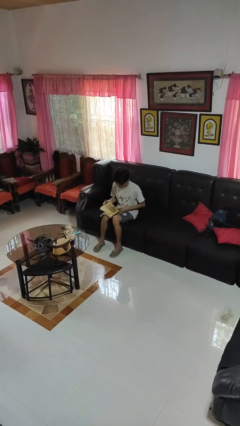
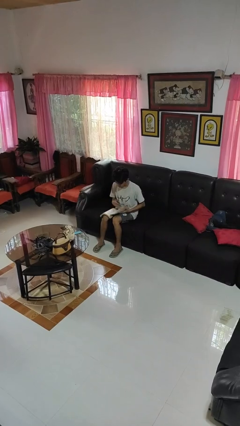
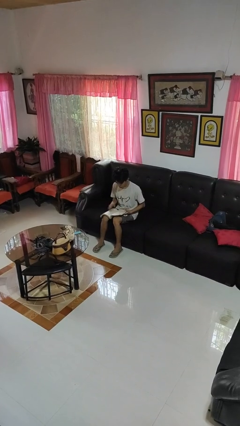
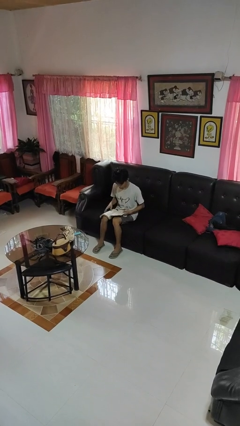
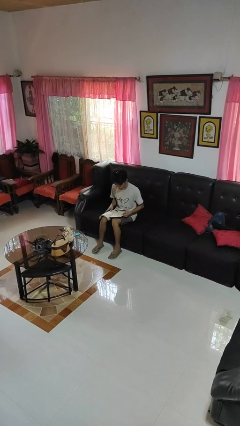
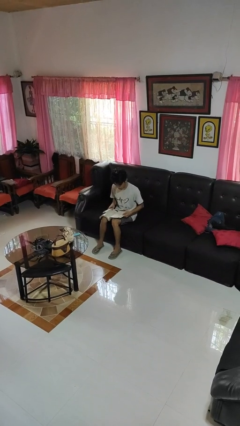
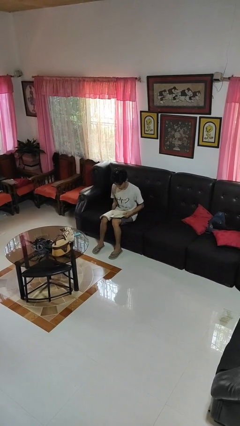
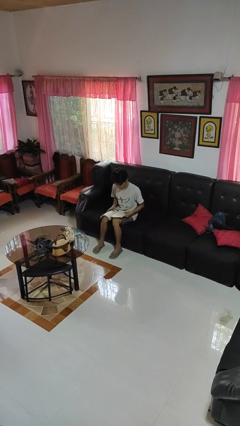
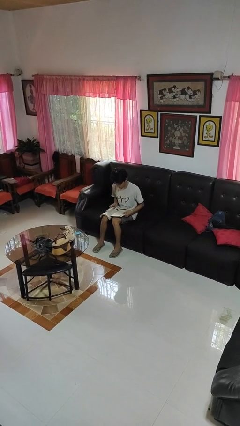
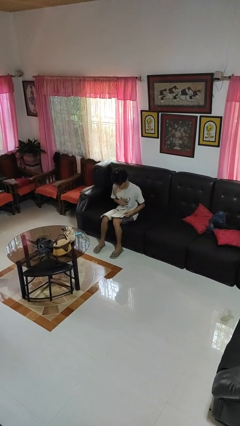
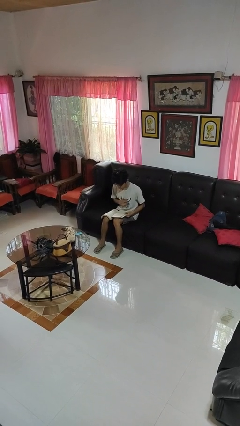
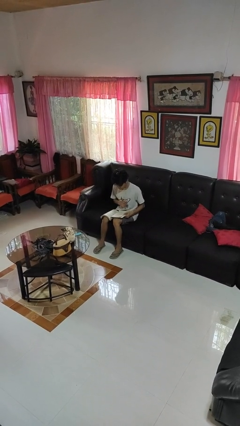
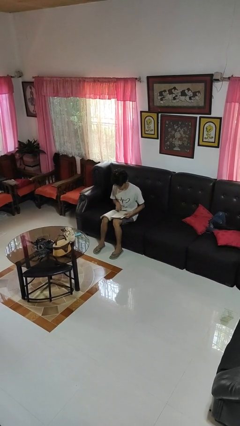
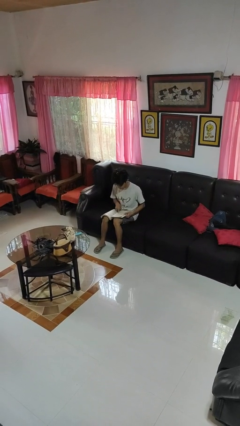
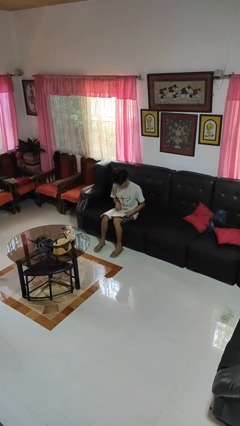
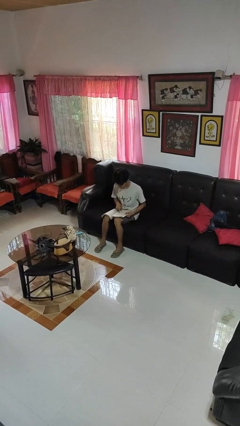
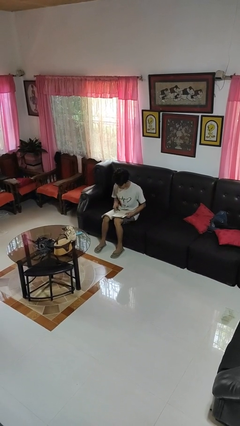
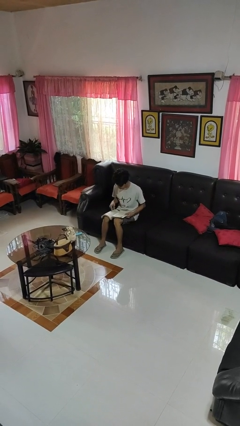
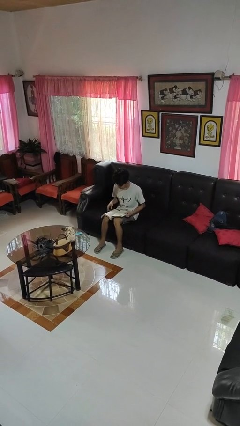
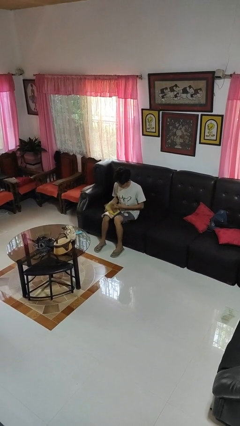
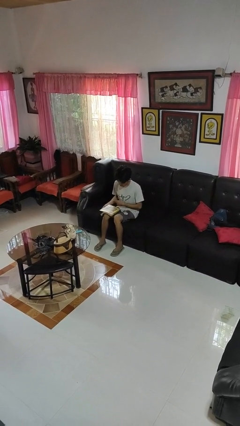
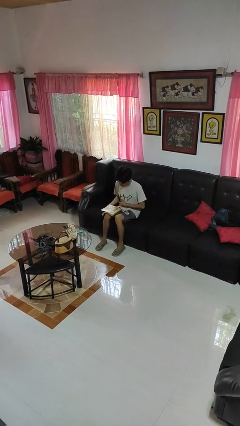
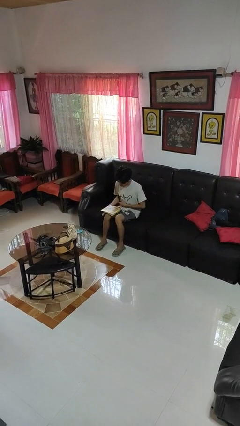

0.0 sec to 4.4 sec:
person reads book

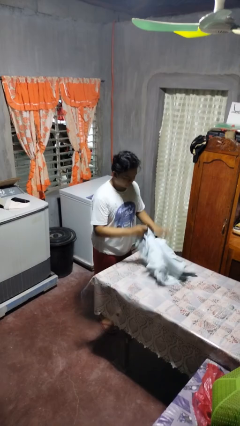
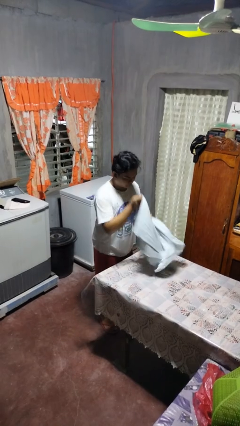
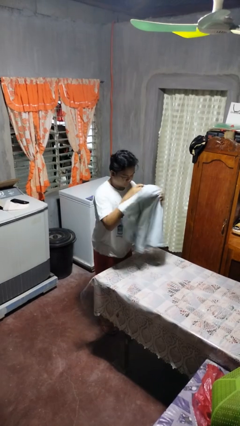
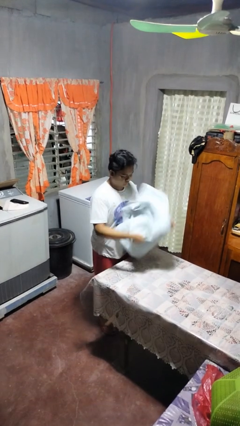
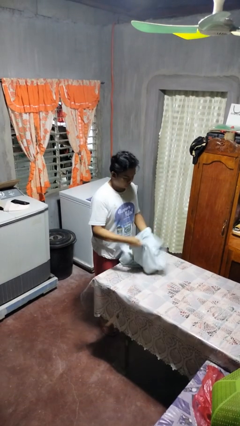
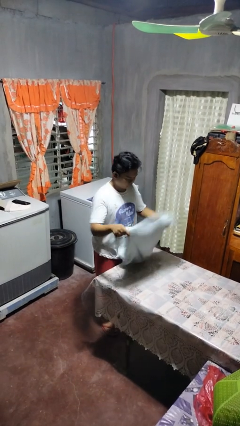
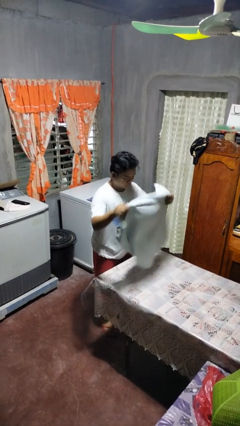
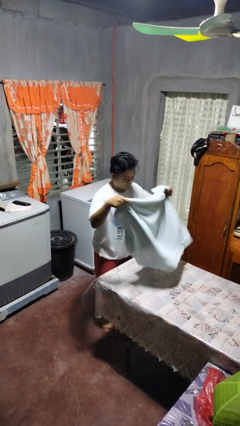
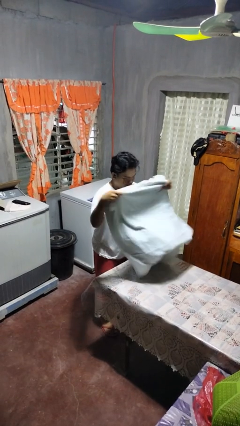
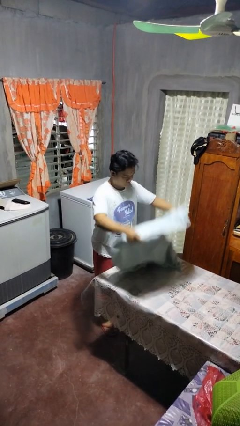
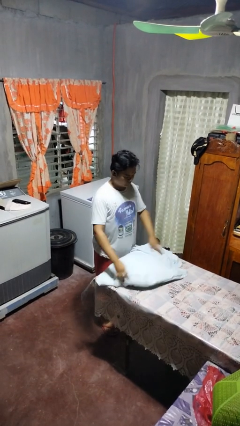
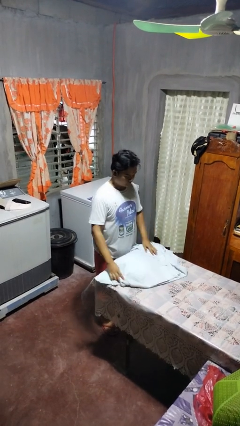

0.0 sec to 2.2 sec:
person unfolds blanket

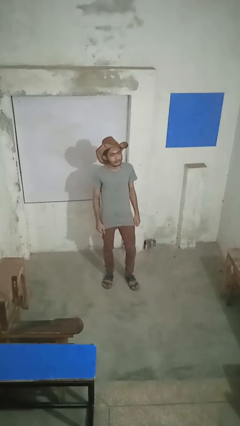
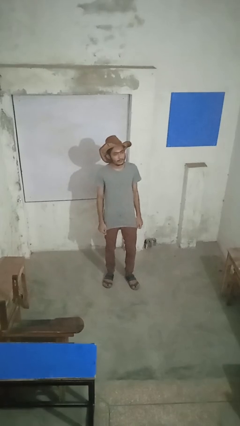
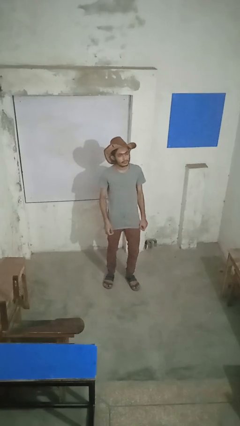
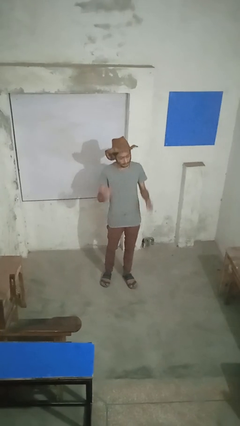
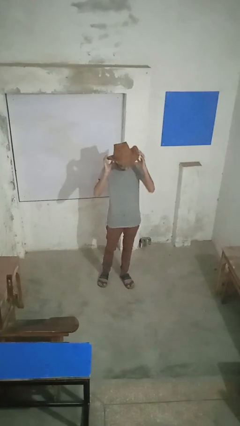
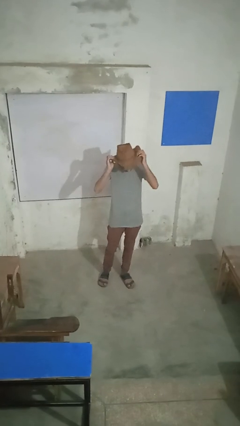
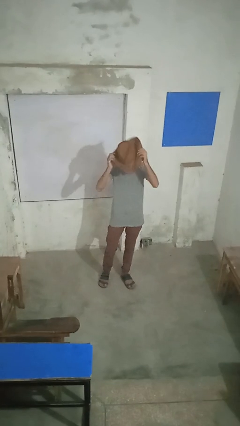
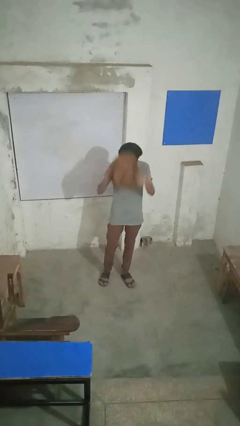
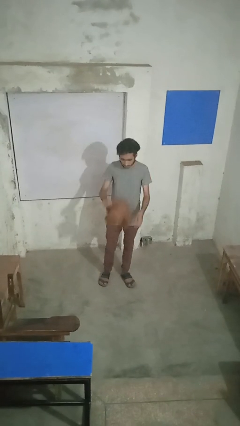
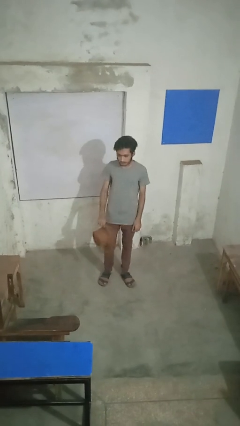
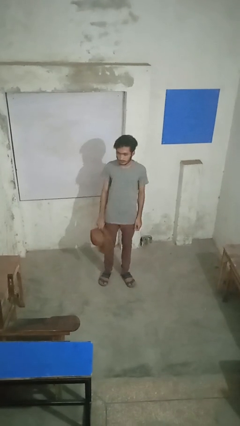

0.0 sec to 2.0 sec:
person takes off hat

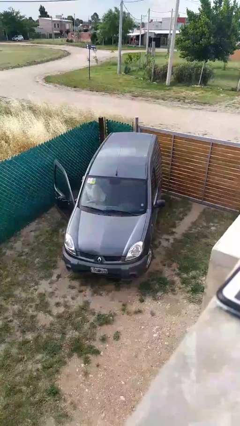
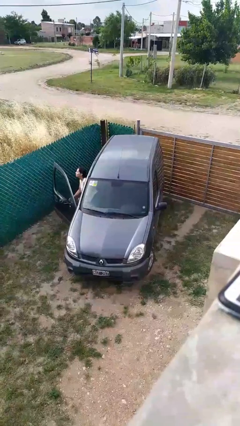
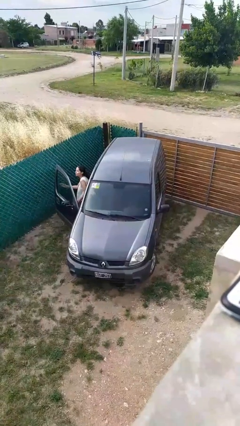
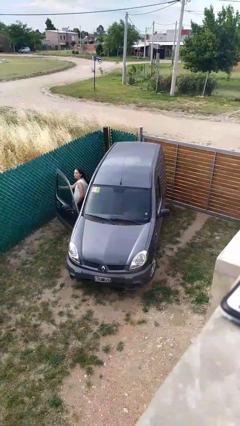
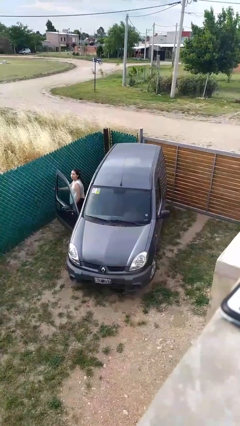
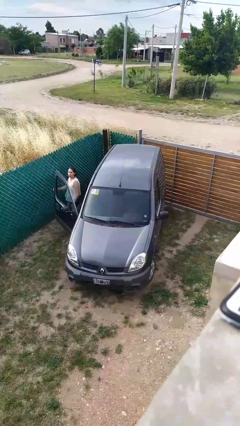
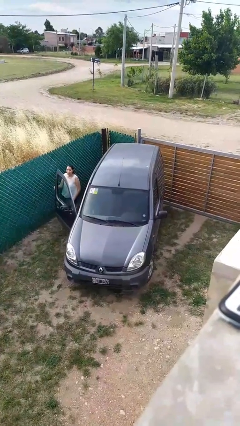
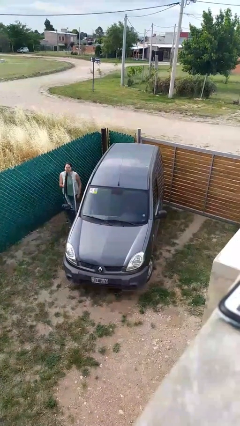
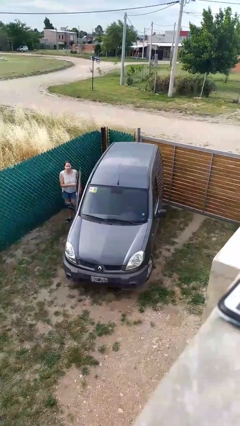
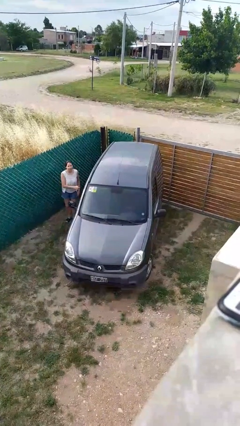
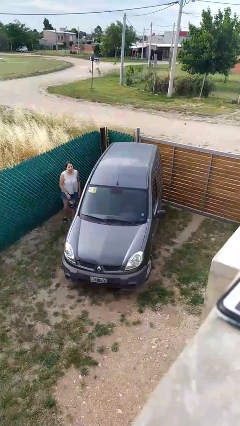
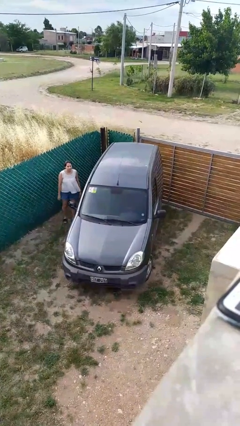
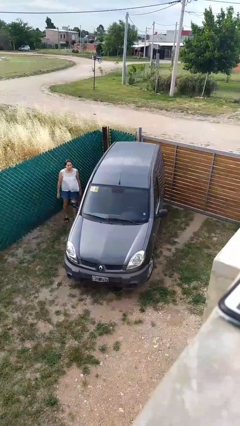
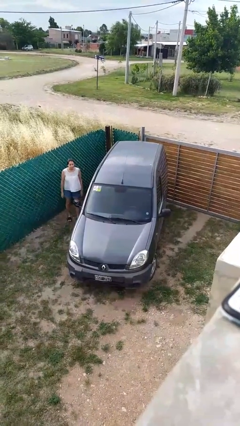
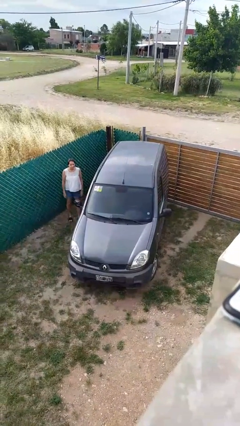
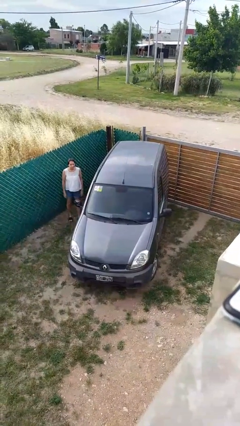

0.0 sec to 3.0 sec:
car drops off person

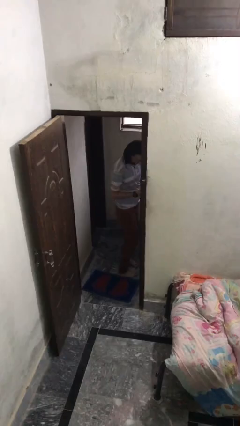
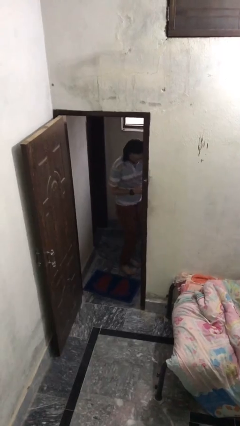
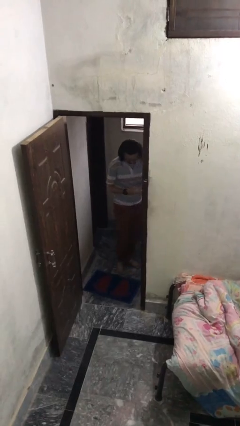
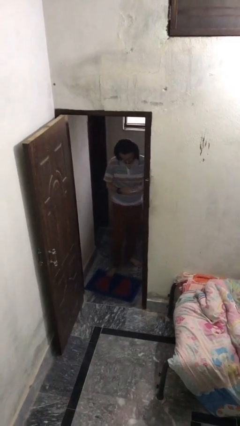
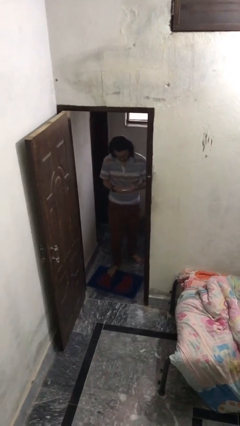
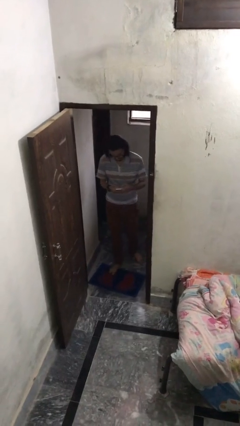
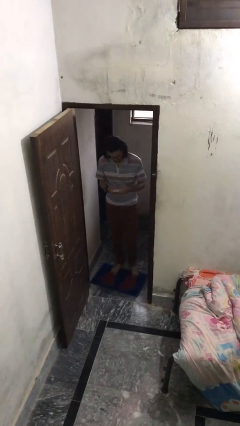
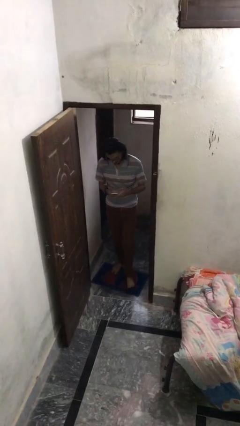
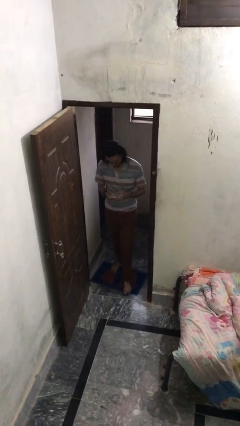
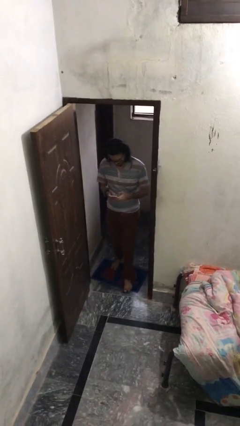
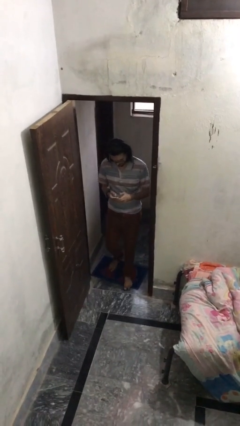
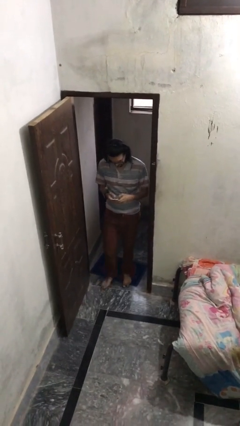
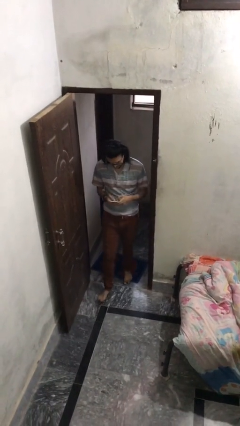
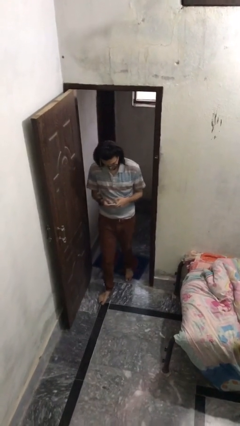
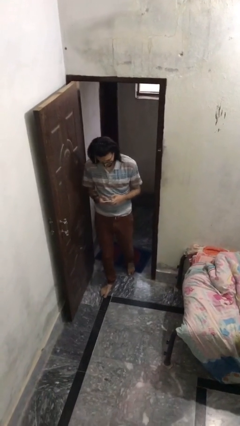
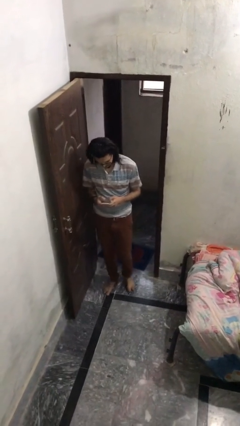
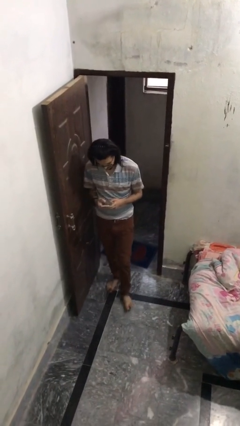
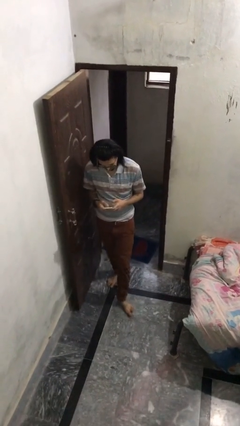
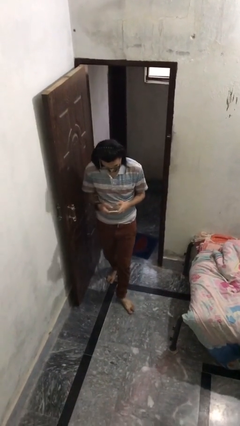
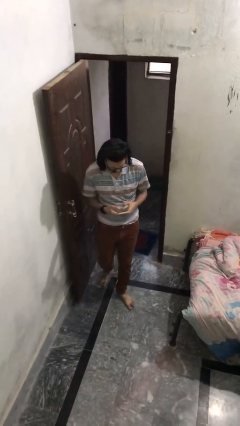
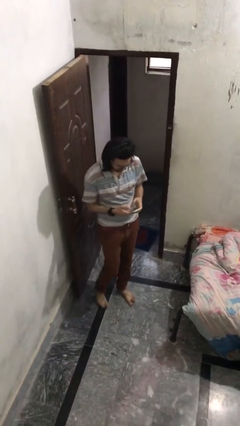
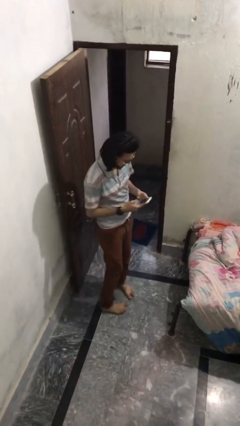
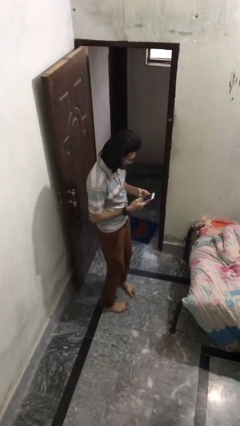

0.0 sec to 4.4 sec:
person enters scene through structure

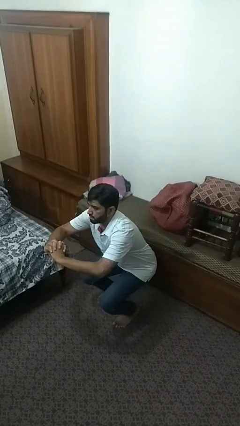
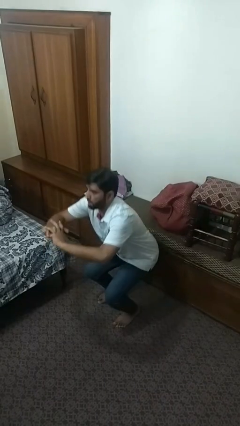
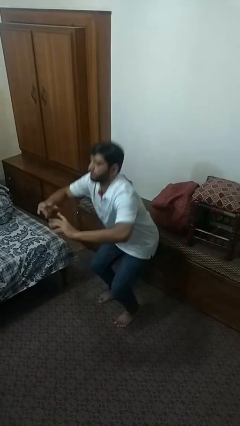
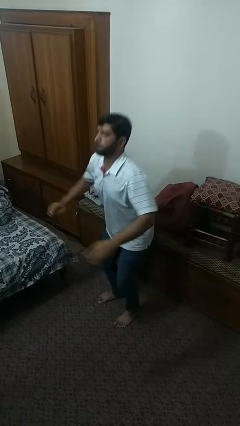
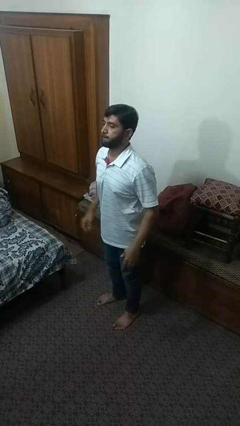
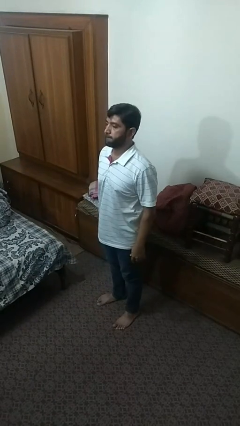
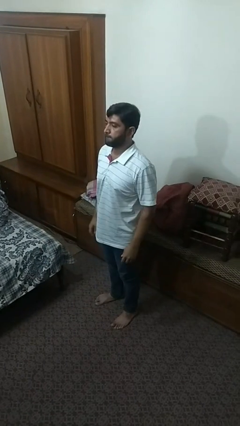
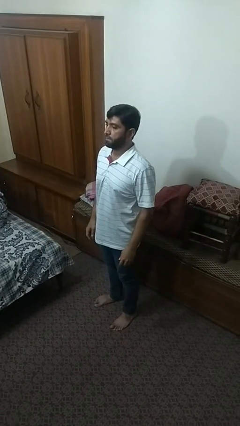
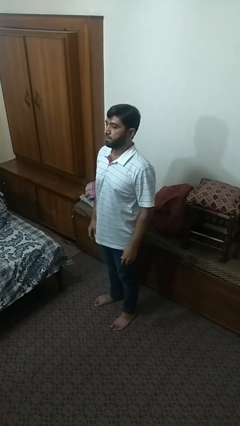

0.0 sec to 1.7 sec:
person stands up
